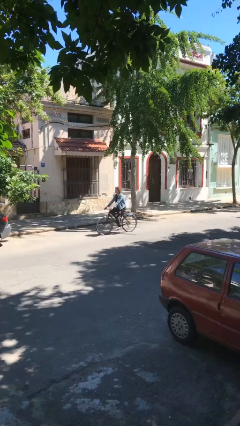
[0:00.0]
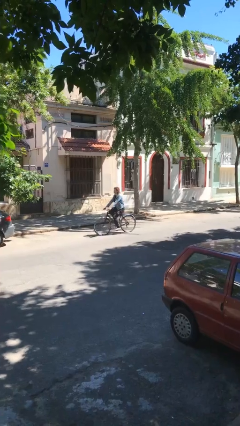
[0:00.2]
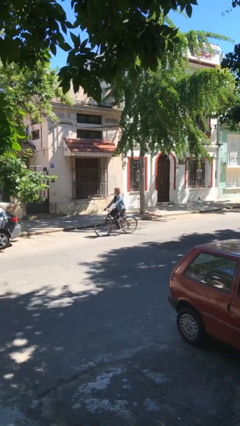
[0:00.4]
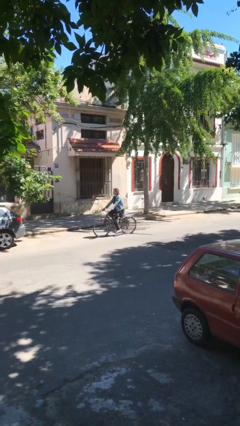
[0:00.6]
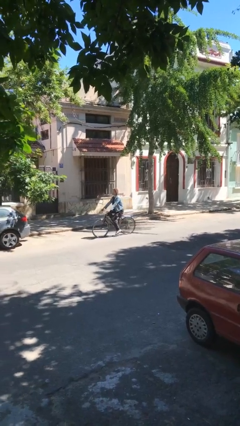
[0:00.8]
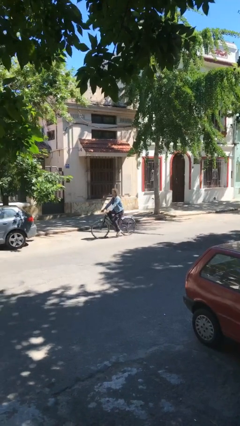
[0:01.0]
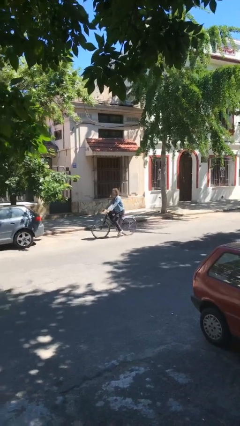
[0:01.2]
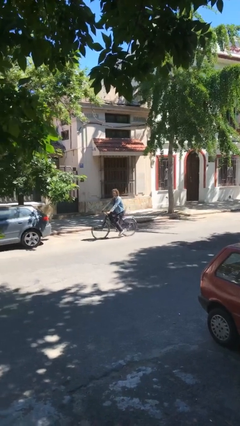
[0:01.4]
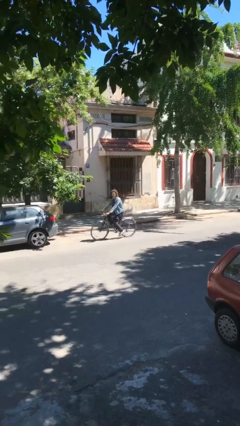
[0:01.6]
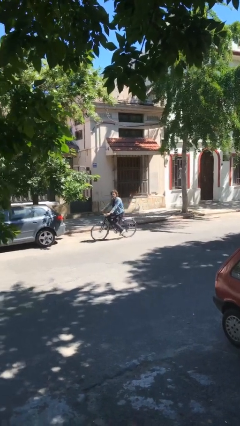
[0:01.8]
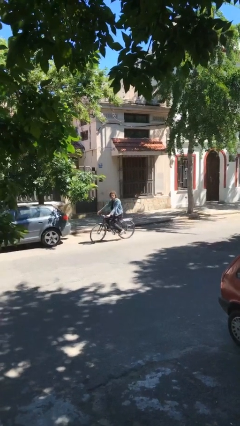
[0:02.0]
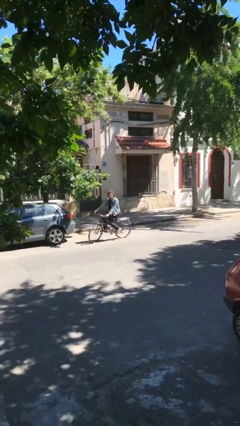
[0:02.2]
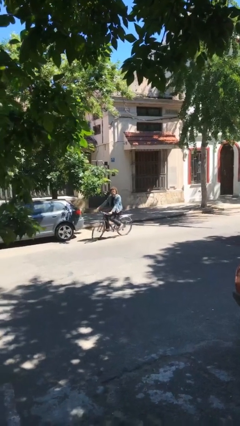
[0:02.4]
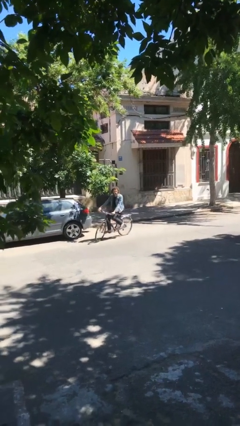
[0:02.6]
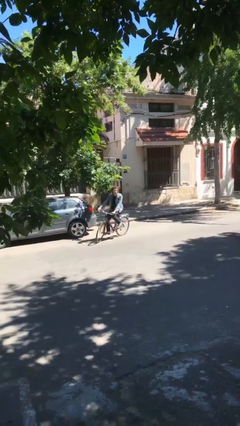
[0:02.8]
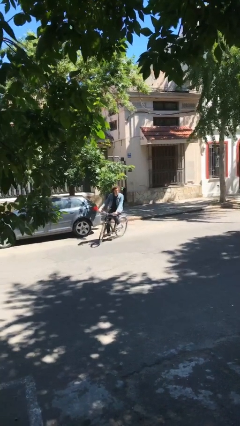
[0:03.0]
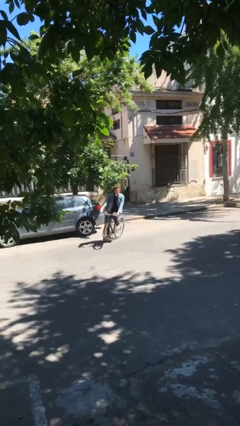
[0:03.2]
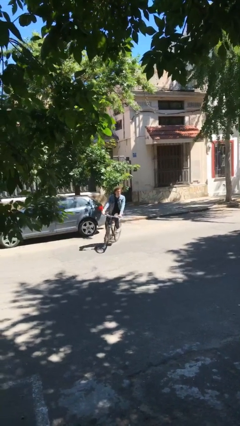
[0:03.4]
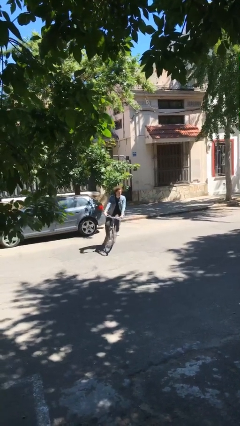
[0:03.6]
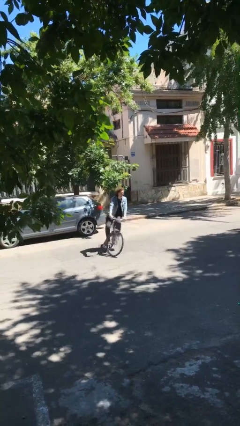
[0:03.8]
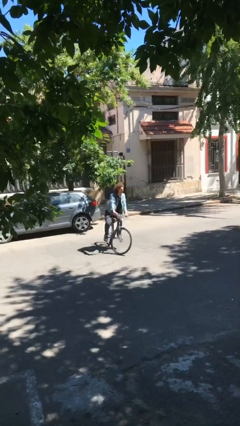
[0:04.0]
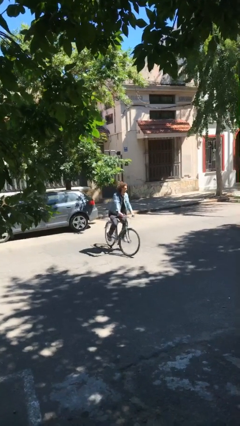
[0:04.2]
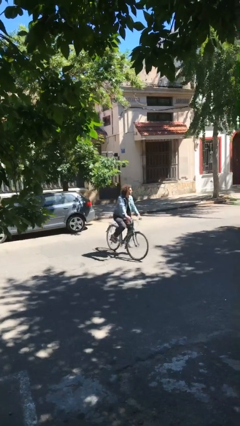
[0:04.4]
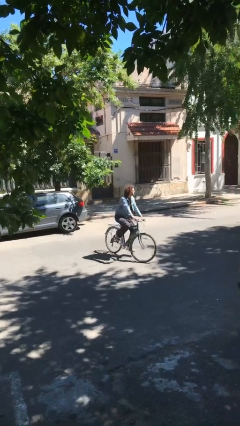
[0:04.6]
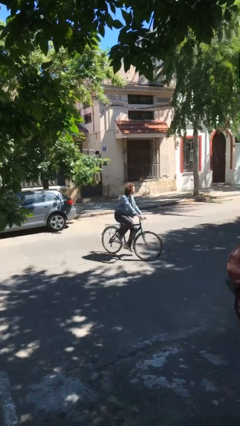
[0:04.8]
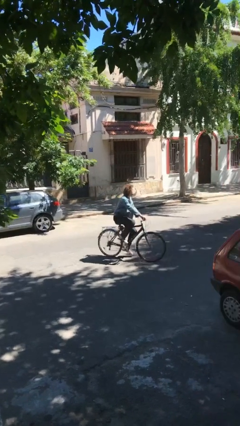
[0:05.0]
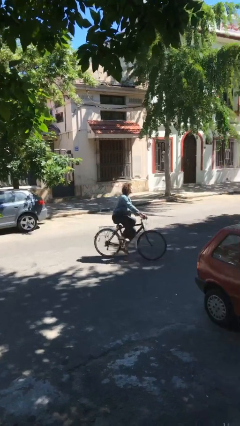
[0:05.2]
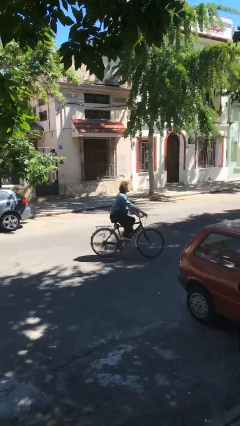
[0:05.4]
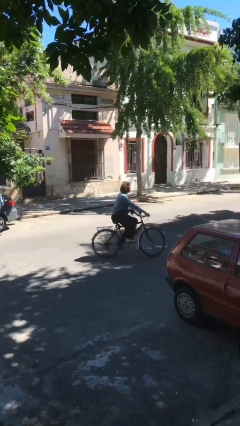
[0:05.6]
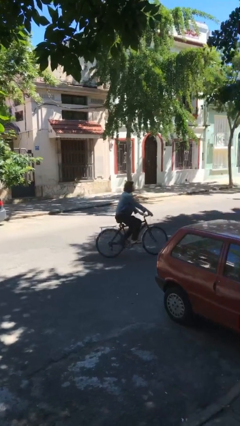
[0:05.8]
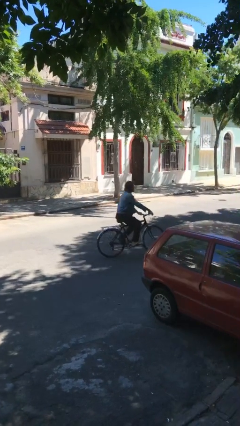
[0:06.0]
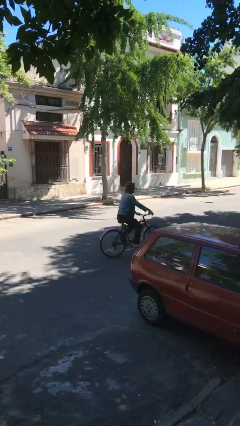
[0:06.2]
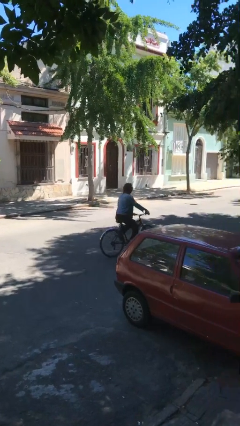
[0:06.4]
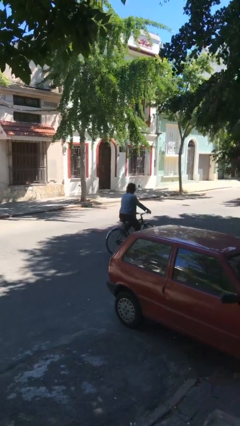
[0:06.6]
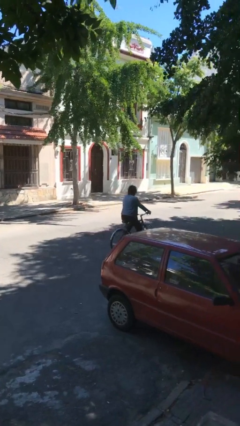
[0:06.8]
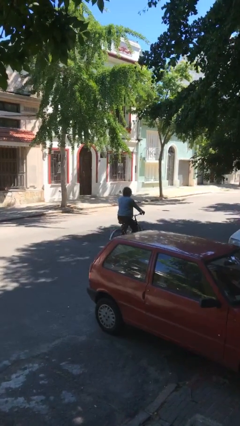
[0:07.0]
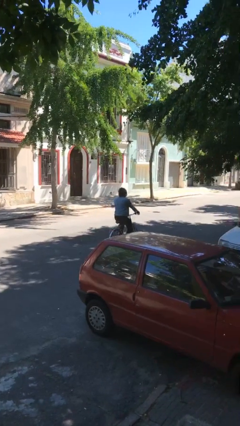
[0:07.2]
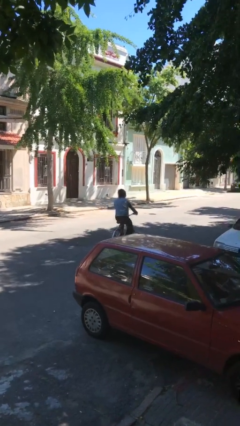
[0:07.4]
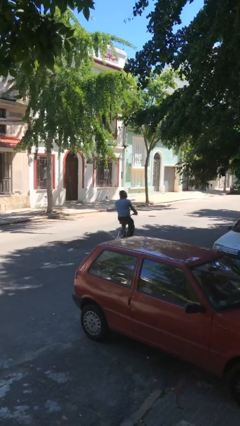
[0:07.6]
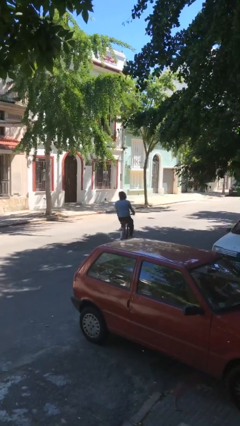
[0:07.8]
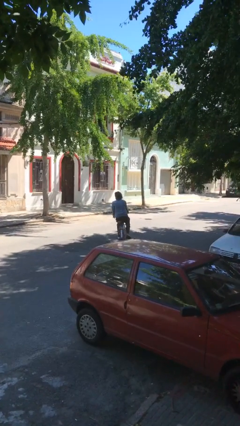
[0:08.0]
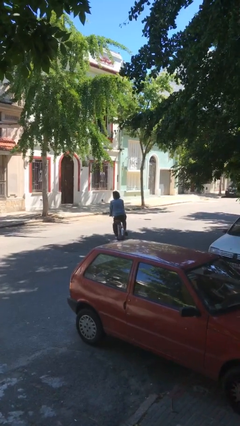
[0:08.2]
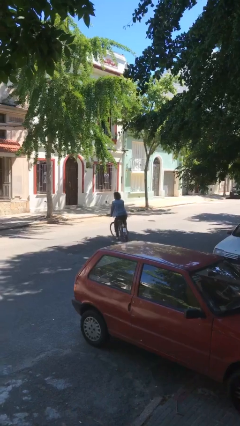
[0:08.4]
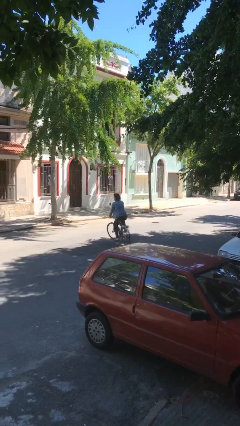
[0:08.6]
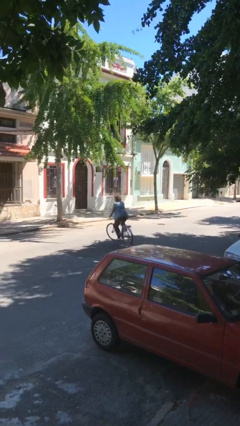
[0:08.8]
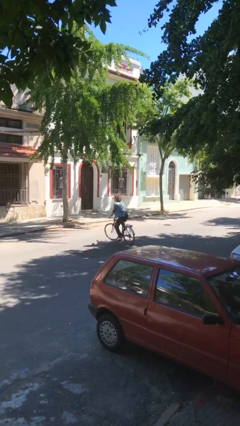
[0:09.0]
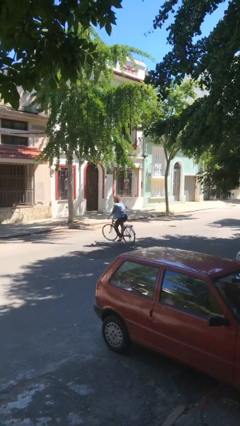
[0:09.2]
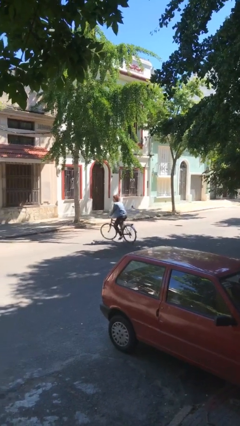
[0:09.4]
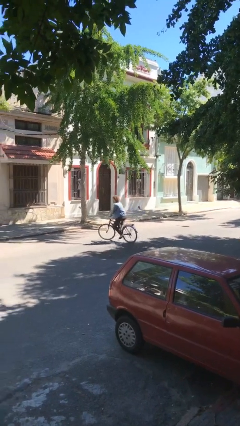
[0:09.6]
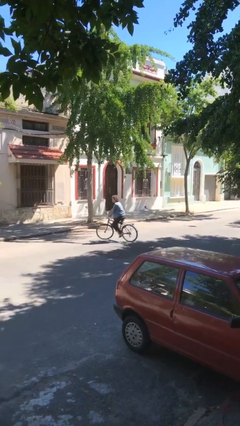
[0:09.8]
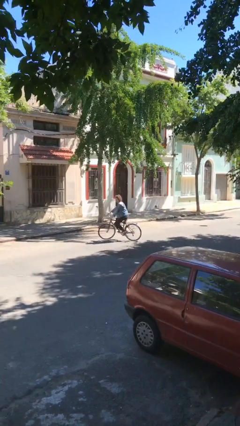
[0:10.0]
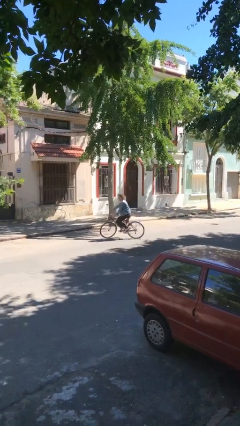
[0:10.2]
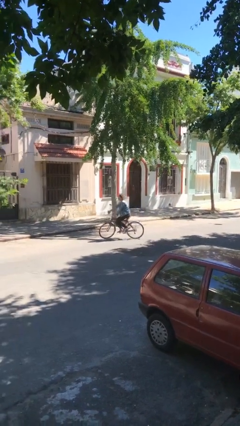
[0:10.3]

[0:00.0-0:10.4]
person rides bicycle

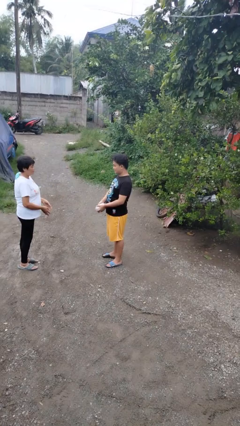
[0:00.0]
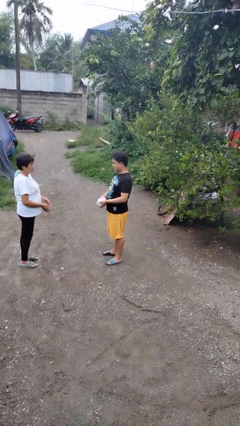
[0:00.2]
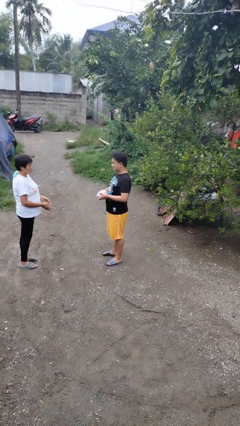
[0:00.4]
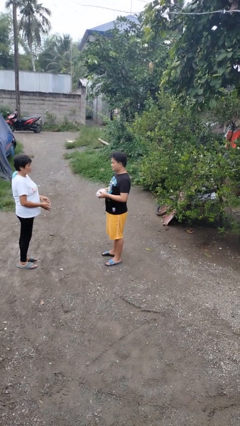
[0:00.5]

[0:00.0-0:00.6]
person catches object from person

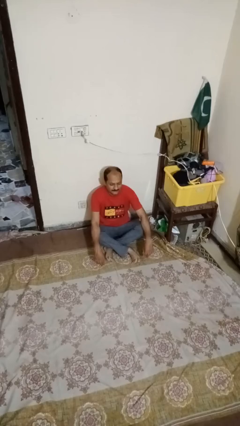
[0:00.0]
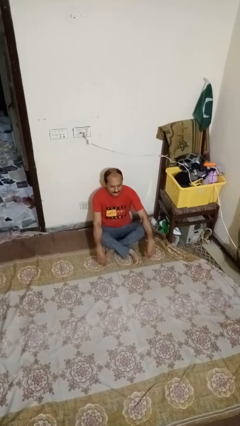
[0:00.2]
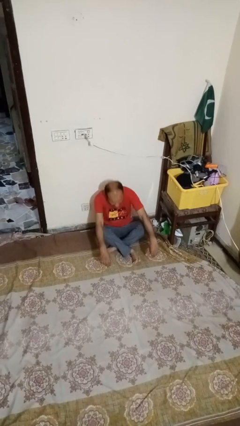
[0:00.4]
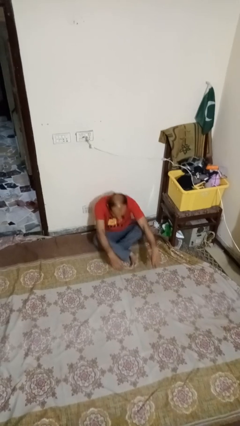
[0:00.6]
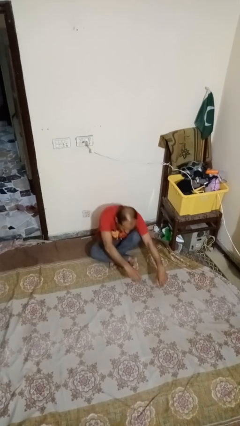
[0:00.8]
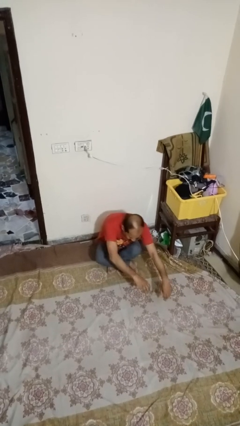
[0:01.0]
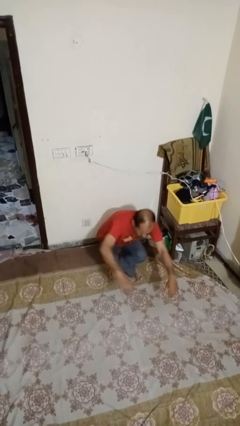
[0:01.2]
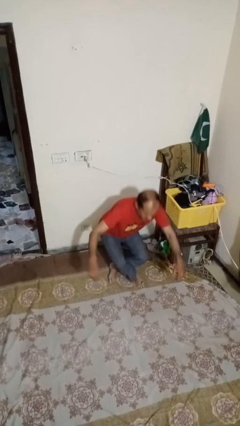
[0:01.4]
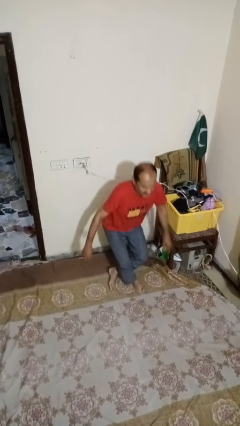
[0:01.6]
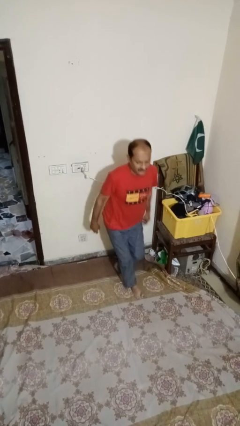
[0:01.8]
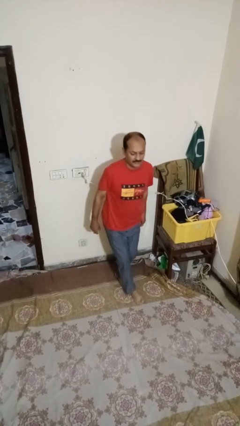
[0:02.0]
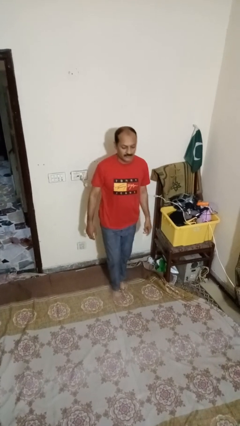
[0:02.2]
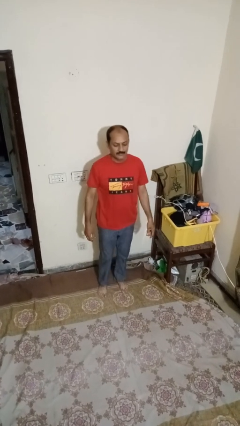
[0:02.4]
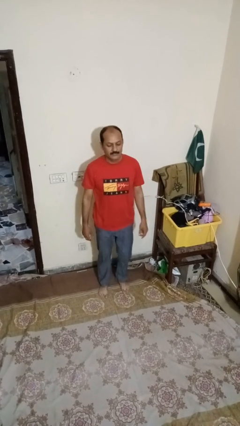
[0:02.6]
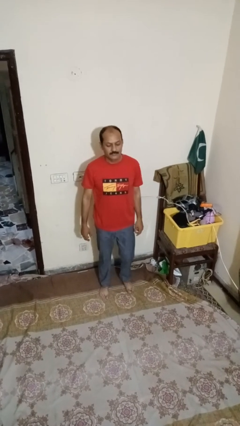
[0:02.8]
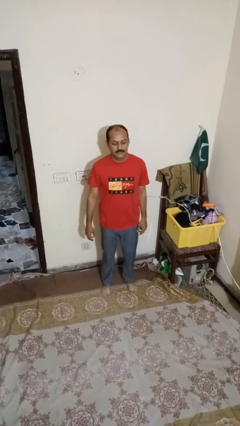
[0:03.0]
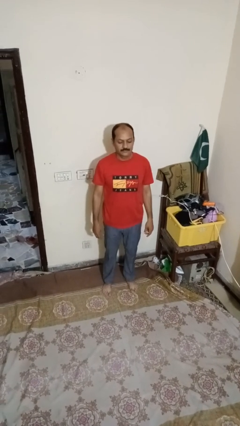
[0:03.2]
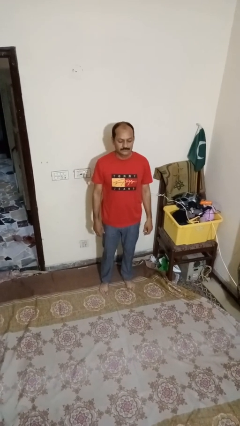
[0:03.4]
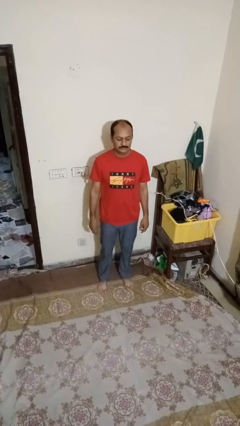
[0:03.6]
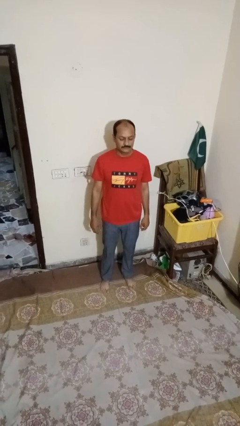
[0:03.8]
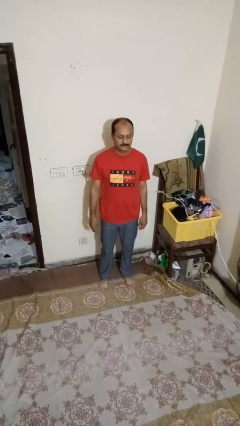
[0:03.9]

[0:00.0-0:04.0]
person stands up from floor

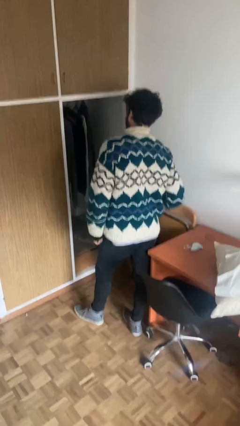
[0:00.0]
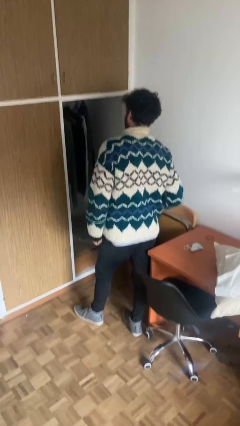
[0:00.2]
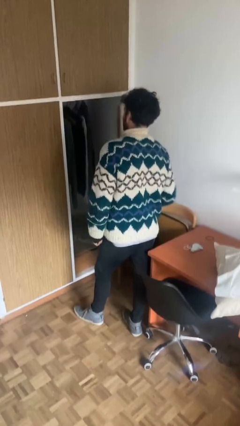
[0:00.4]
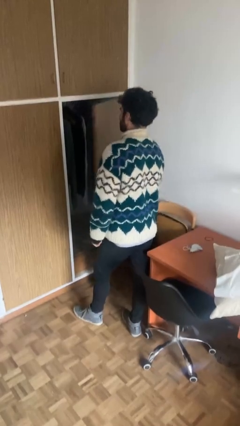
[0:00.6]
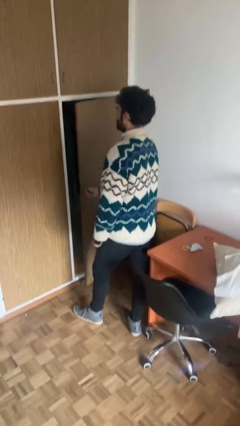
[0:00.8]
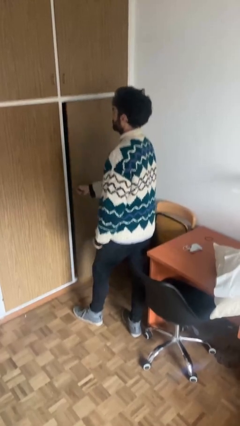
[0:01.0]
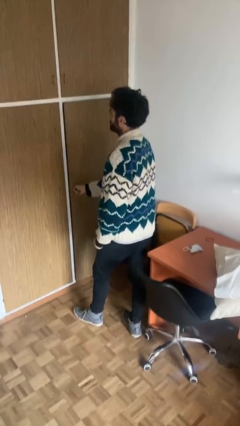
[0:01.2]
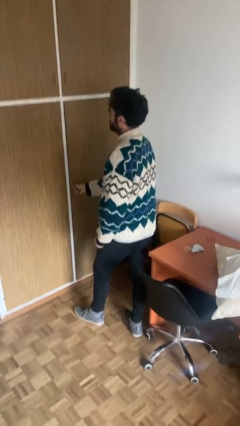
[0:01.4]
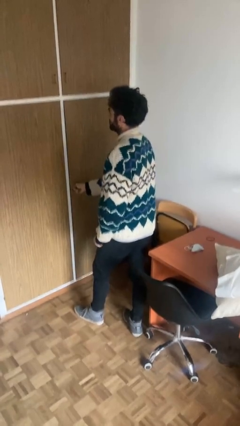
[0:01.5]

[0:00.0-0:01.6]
person closes closet door

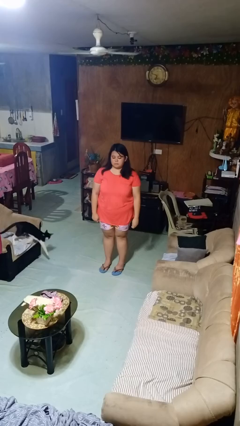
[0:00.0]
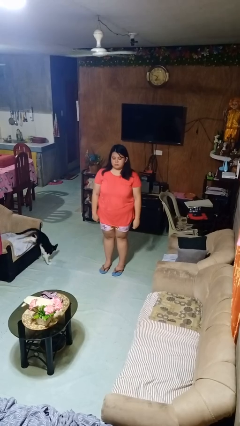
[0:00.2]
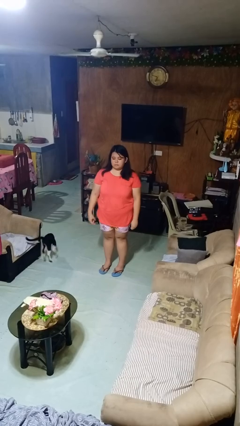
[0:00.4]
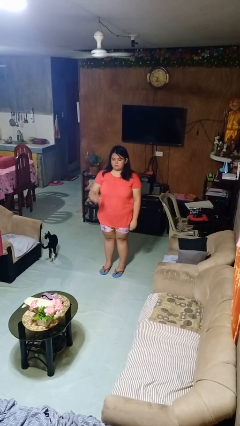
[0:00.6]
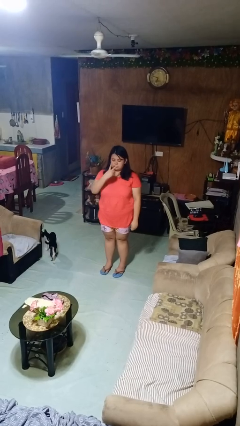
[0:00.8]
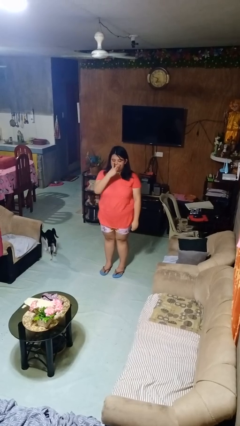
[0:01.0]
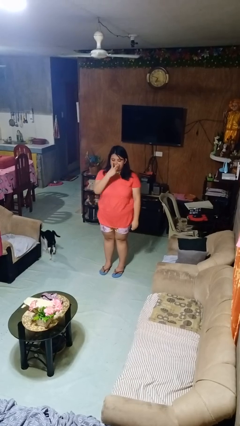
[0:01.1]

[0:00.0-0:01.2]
person gestures watch closely

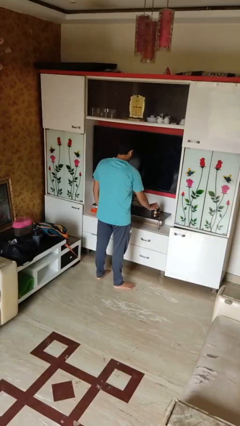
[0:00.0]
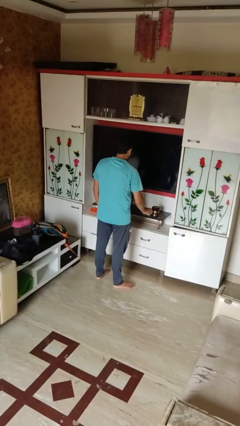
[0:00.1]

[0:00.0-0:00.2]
person puts down object on countertop
